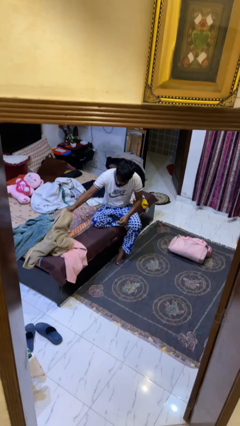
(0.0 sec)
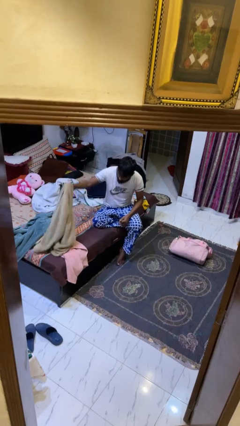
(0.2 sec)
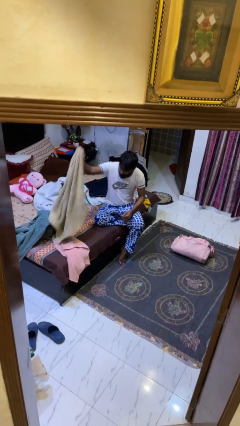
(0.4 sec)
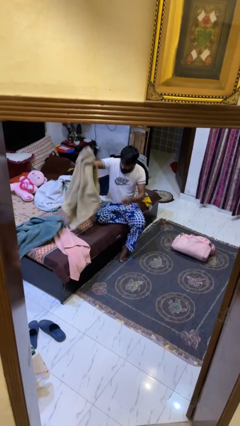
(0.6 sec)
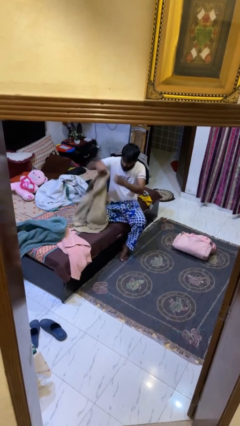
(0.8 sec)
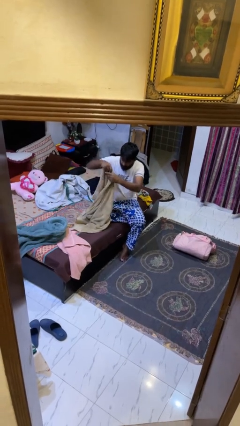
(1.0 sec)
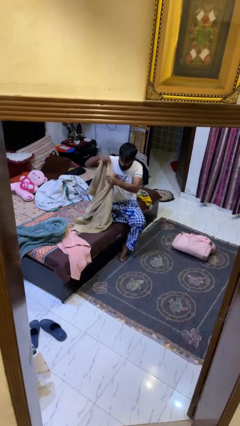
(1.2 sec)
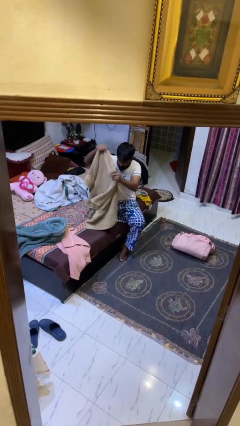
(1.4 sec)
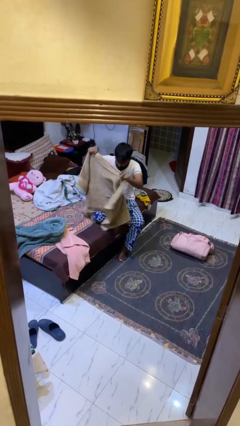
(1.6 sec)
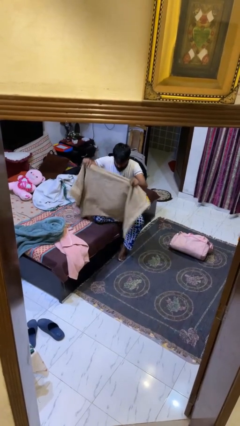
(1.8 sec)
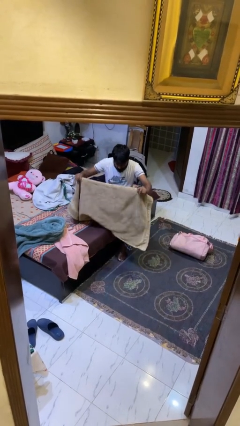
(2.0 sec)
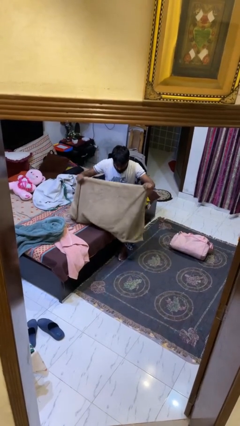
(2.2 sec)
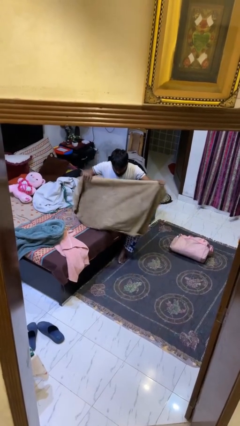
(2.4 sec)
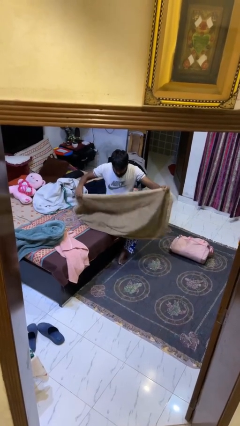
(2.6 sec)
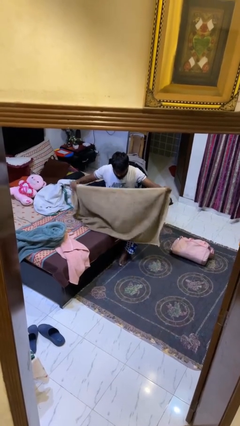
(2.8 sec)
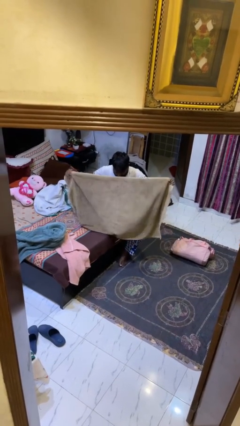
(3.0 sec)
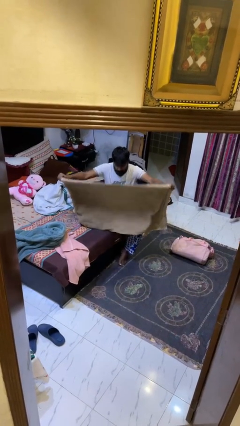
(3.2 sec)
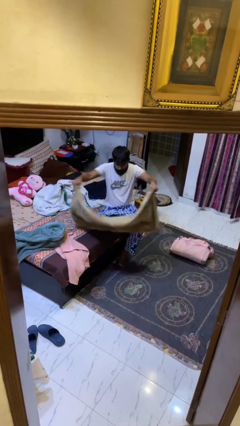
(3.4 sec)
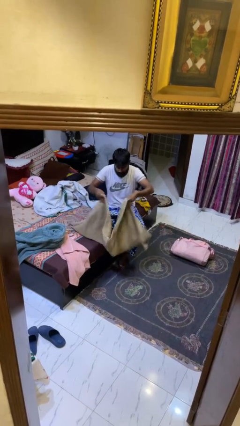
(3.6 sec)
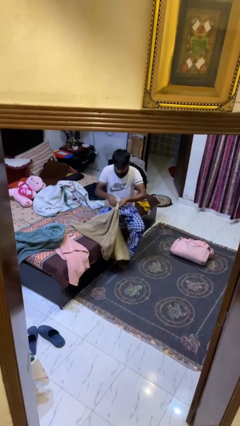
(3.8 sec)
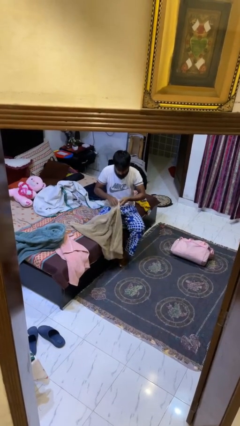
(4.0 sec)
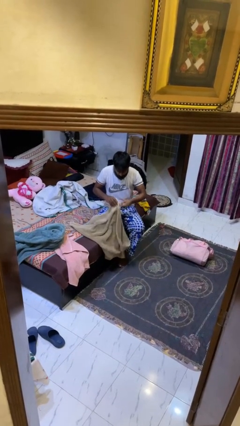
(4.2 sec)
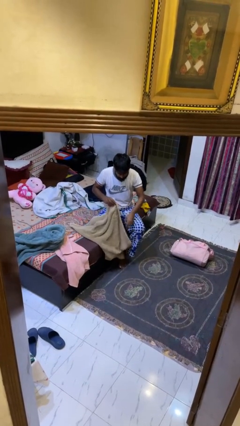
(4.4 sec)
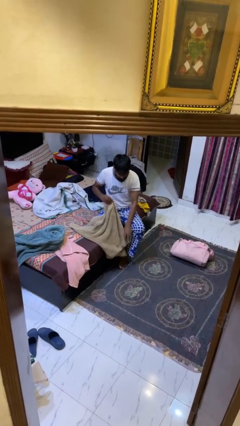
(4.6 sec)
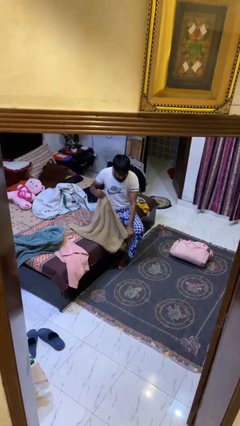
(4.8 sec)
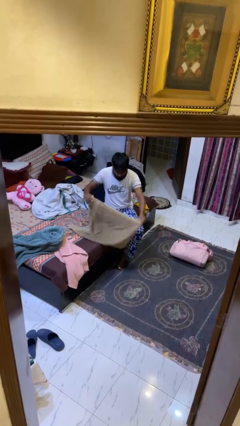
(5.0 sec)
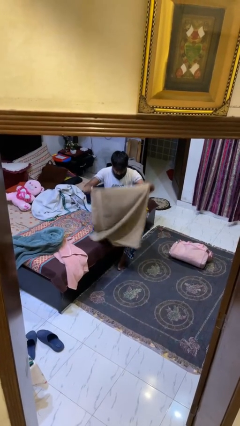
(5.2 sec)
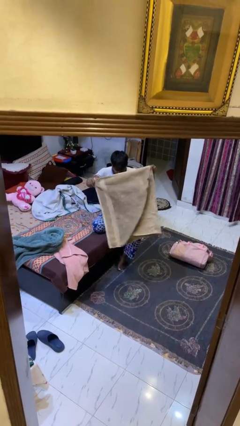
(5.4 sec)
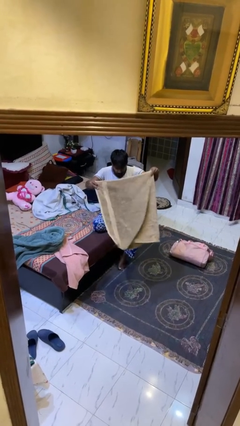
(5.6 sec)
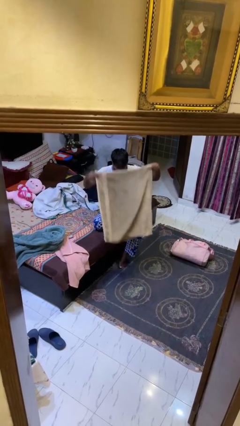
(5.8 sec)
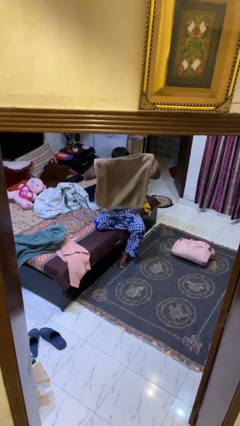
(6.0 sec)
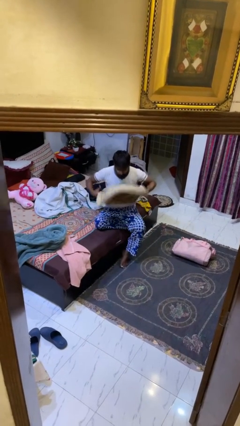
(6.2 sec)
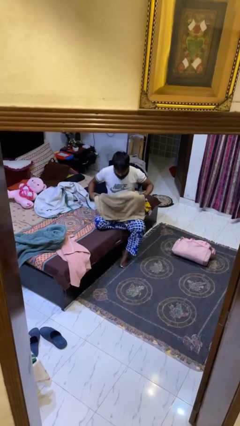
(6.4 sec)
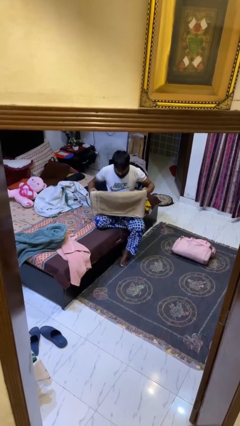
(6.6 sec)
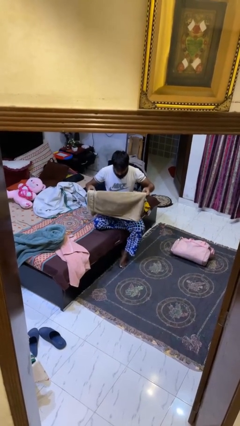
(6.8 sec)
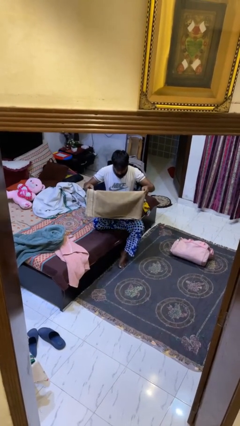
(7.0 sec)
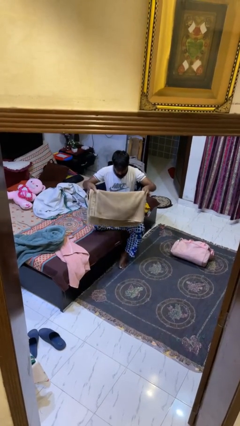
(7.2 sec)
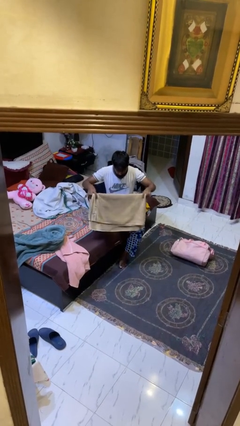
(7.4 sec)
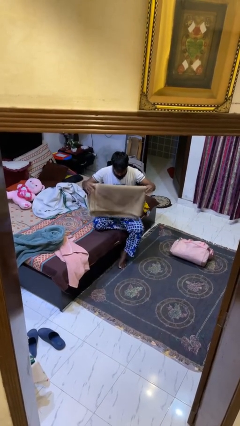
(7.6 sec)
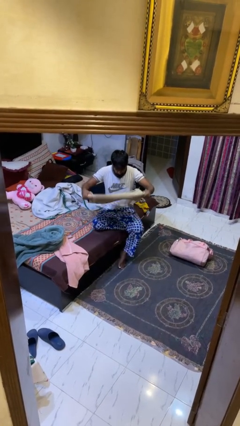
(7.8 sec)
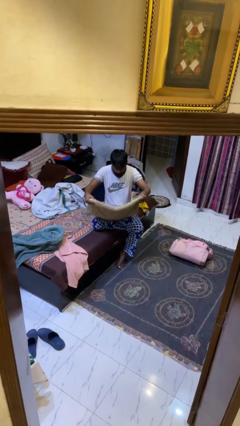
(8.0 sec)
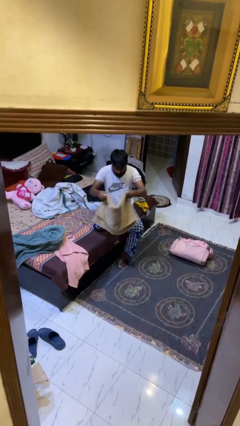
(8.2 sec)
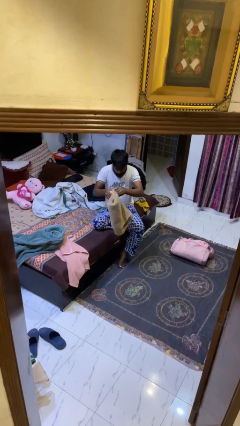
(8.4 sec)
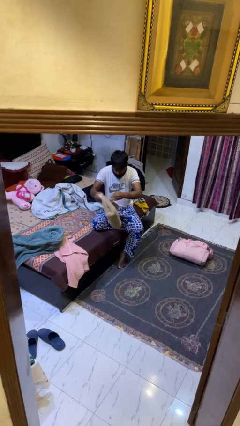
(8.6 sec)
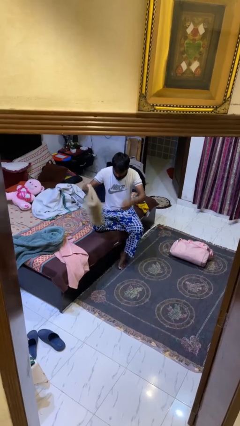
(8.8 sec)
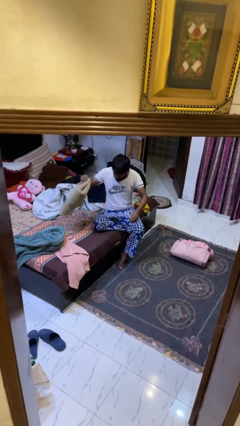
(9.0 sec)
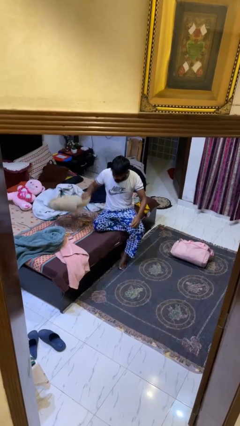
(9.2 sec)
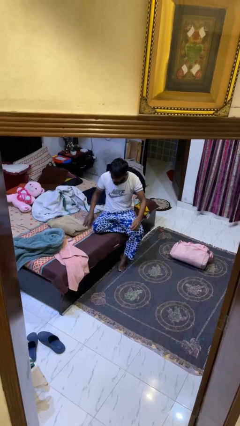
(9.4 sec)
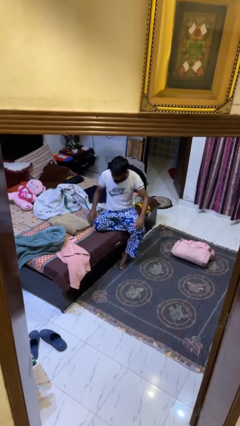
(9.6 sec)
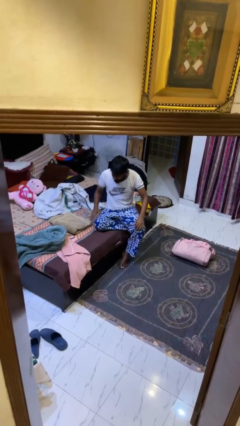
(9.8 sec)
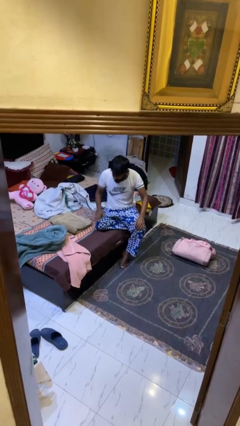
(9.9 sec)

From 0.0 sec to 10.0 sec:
person folds towel

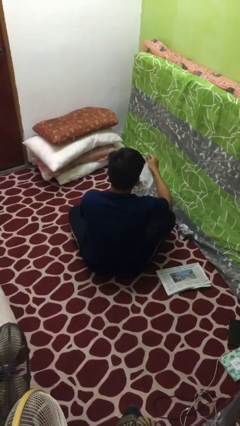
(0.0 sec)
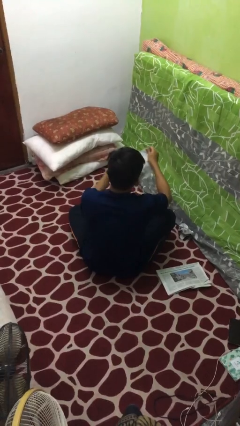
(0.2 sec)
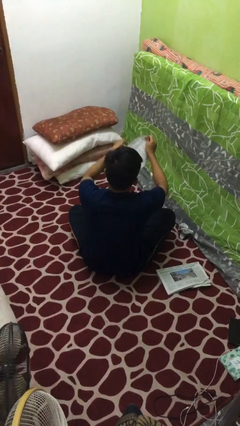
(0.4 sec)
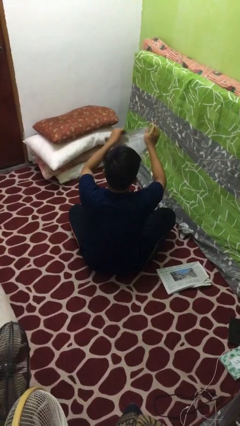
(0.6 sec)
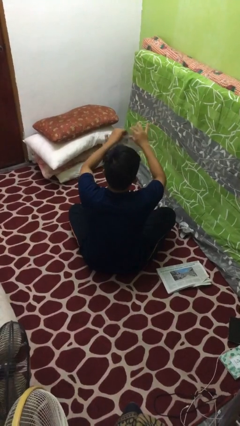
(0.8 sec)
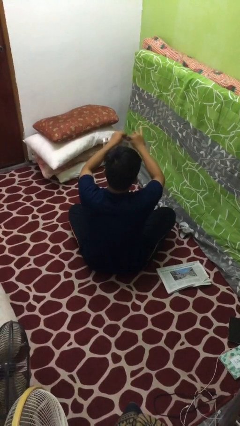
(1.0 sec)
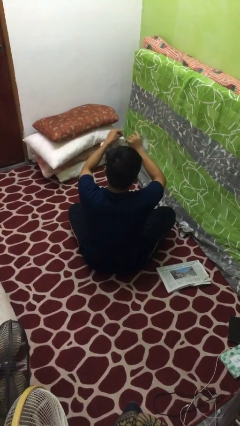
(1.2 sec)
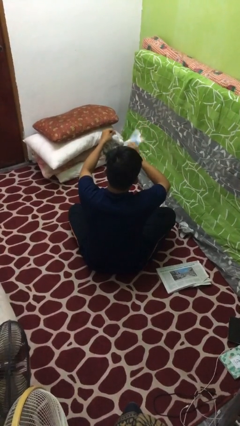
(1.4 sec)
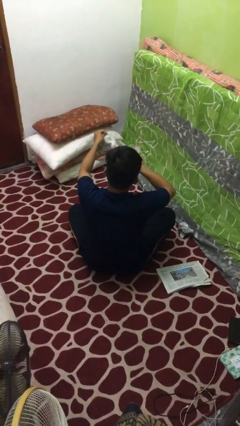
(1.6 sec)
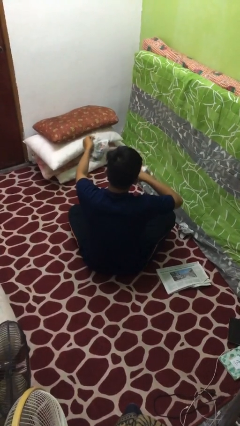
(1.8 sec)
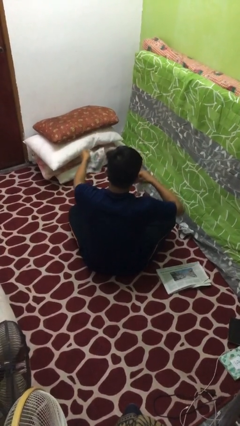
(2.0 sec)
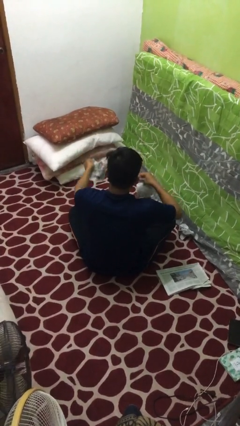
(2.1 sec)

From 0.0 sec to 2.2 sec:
person tears paper

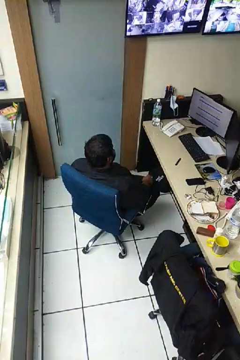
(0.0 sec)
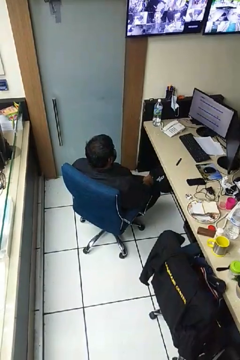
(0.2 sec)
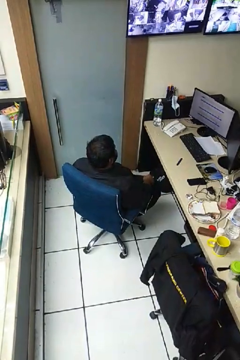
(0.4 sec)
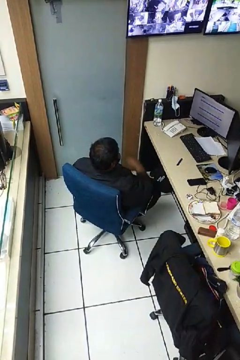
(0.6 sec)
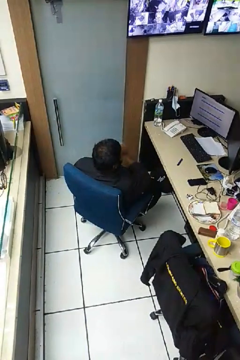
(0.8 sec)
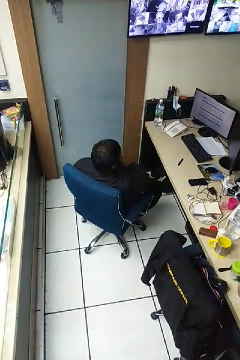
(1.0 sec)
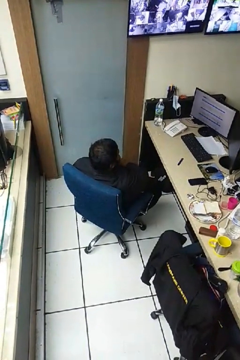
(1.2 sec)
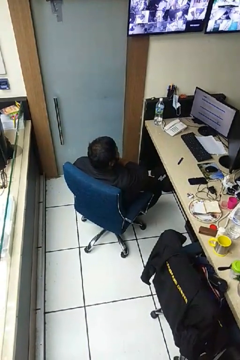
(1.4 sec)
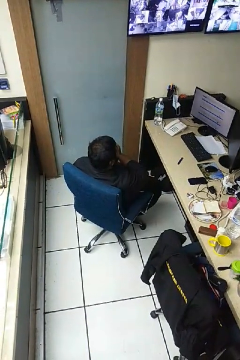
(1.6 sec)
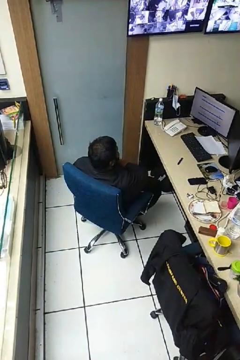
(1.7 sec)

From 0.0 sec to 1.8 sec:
person drums on chest

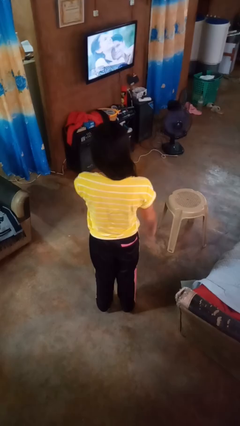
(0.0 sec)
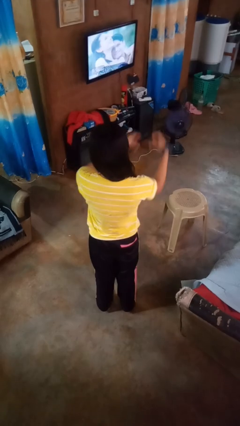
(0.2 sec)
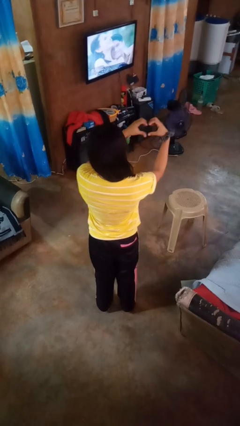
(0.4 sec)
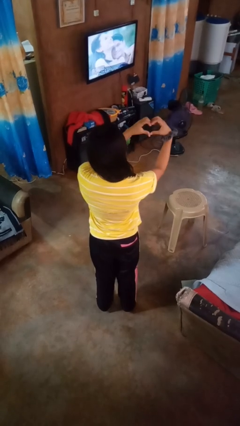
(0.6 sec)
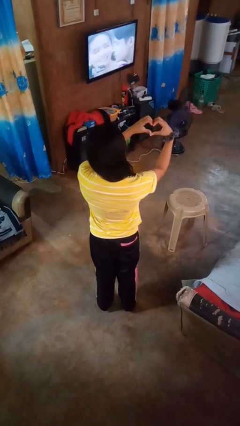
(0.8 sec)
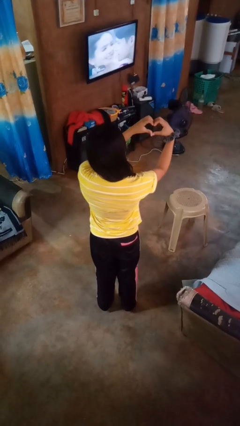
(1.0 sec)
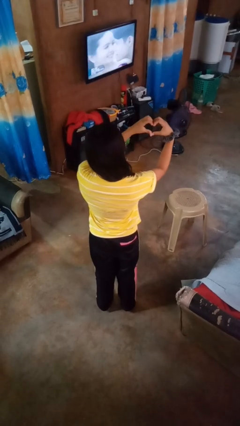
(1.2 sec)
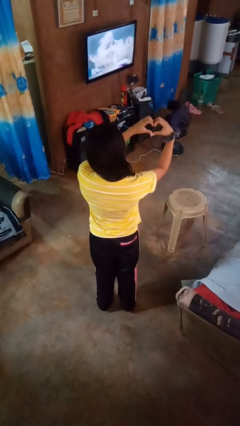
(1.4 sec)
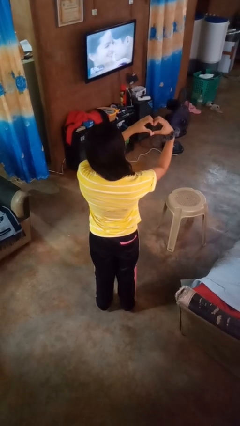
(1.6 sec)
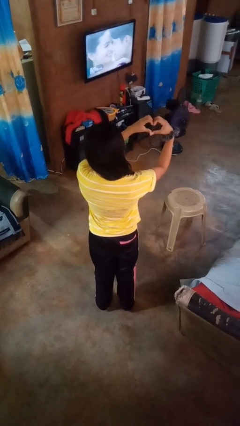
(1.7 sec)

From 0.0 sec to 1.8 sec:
person gestures heart

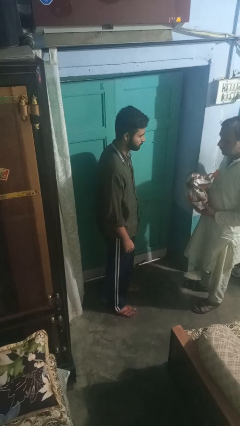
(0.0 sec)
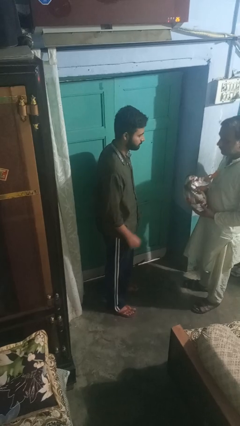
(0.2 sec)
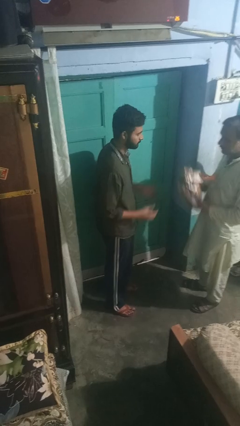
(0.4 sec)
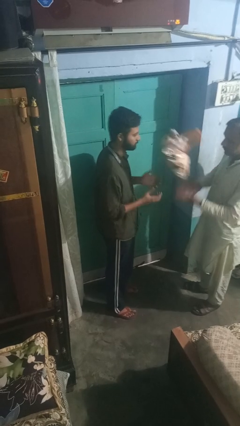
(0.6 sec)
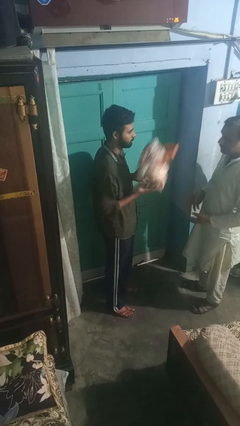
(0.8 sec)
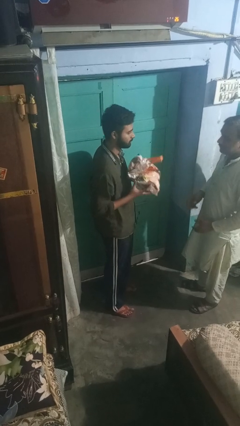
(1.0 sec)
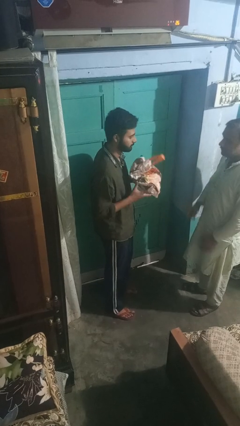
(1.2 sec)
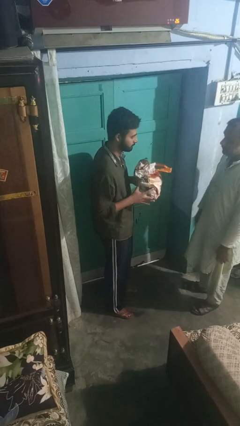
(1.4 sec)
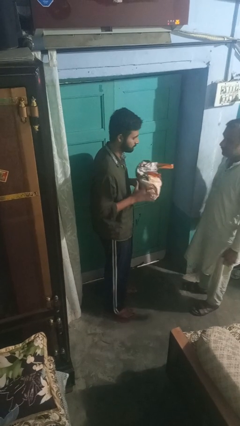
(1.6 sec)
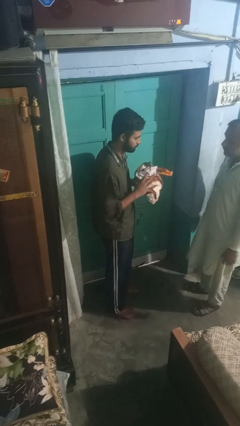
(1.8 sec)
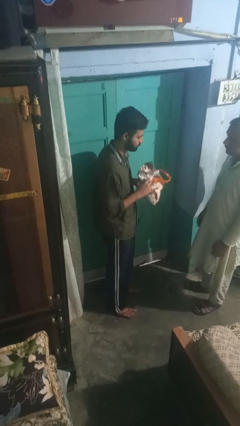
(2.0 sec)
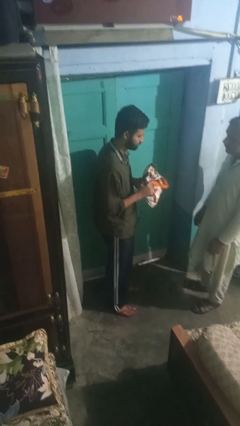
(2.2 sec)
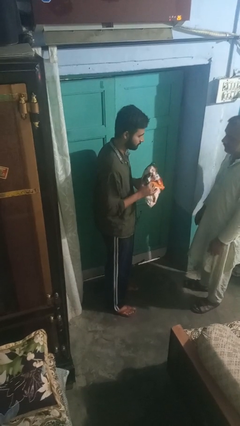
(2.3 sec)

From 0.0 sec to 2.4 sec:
person catches object from person
